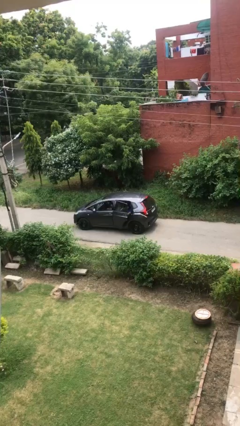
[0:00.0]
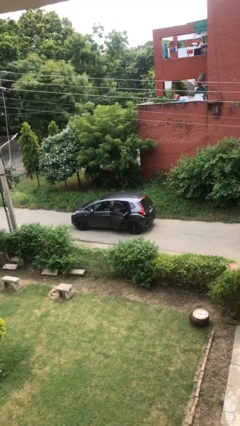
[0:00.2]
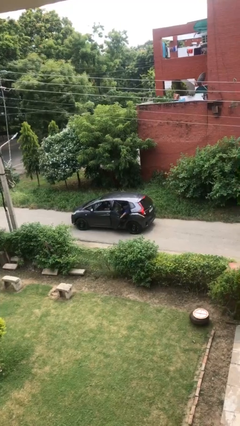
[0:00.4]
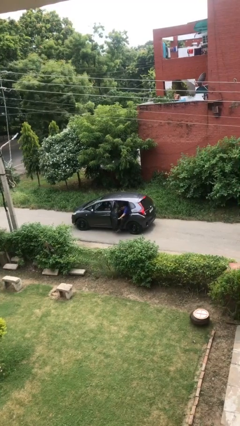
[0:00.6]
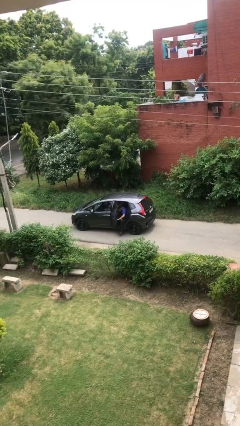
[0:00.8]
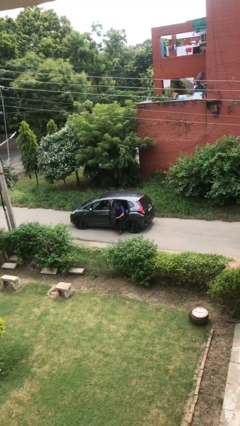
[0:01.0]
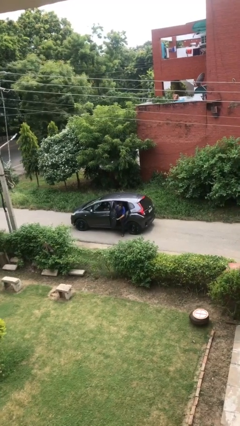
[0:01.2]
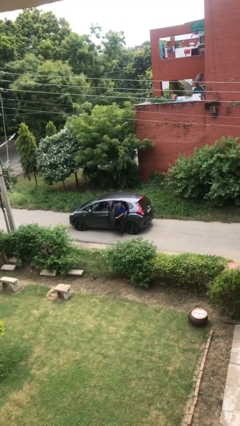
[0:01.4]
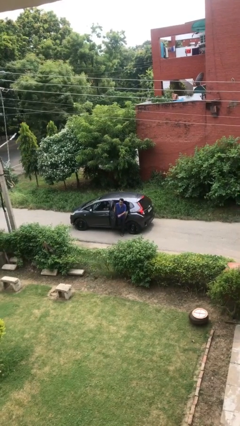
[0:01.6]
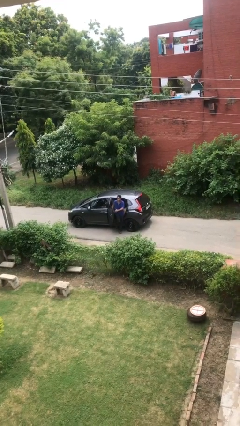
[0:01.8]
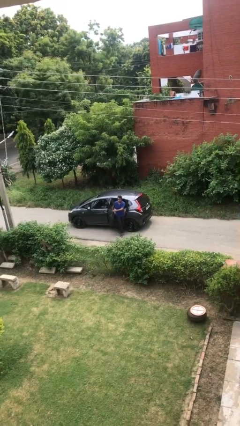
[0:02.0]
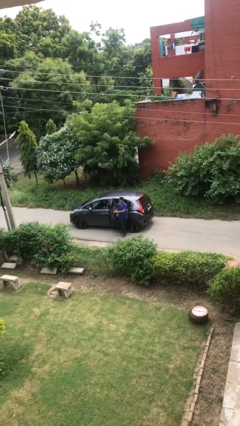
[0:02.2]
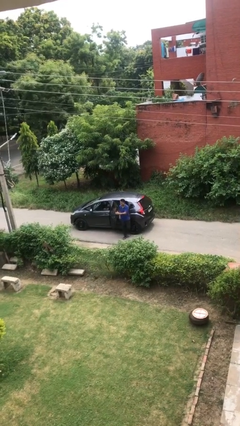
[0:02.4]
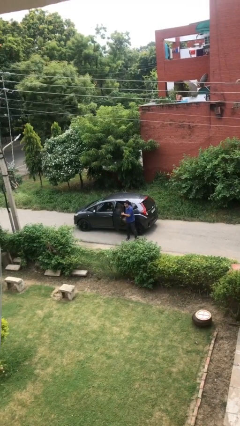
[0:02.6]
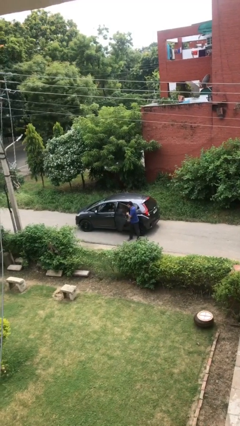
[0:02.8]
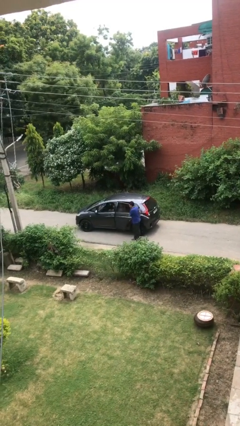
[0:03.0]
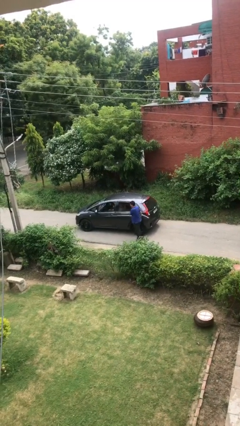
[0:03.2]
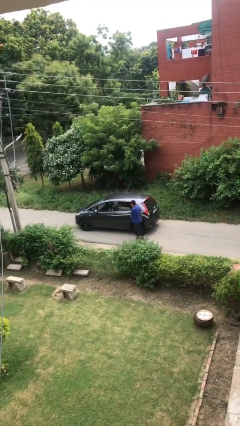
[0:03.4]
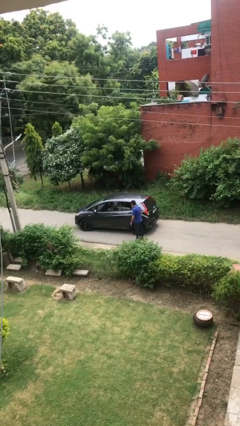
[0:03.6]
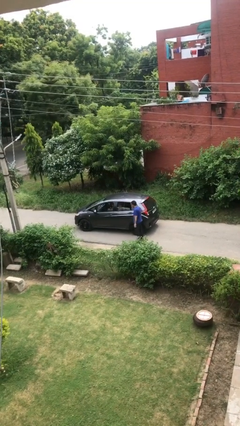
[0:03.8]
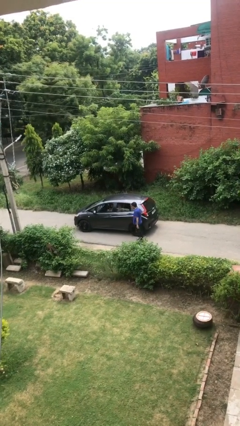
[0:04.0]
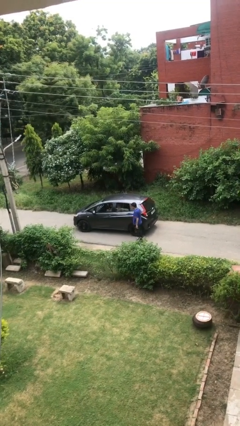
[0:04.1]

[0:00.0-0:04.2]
car drops off person

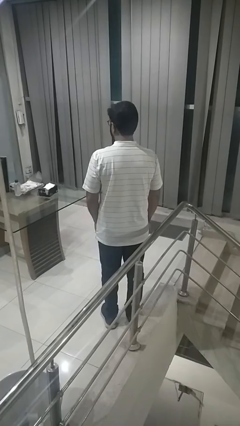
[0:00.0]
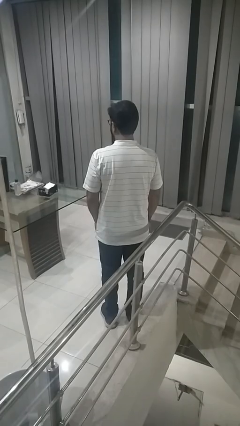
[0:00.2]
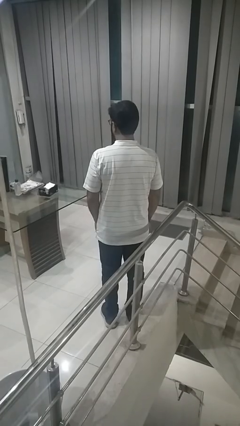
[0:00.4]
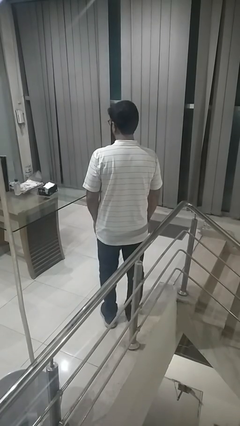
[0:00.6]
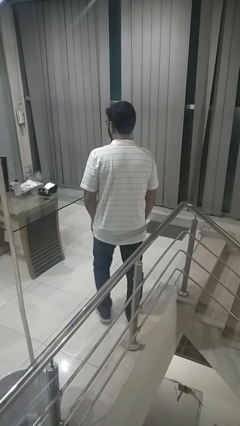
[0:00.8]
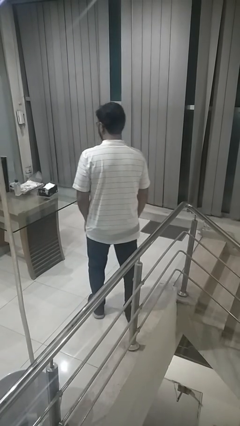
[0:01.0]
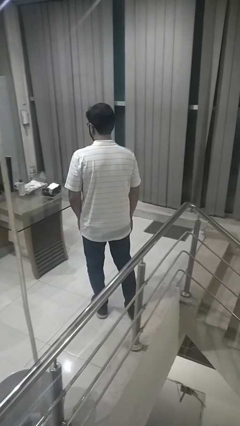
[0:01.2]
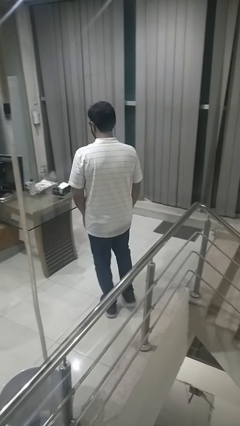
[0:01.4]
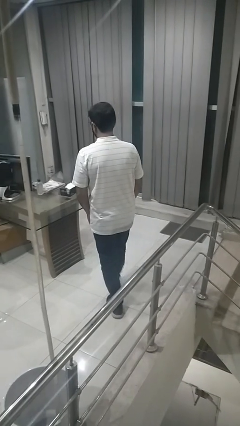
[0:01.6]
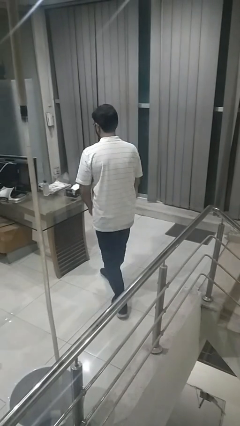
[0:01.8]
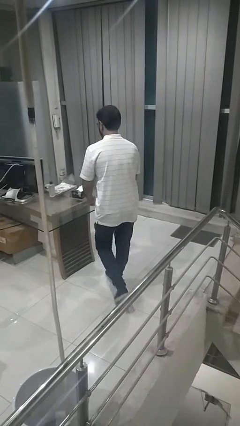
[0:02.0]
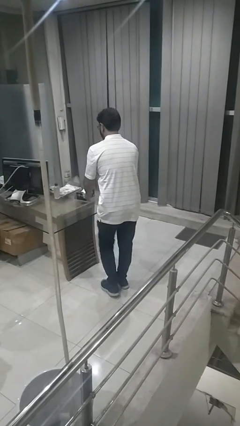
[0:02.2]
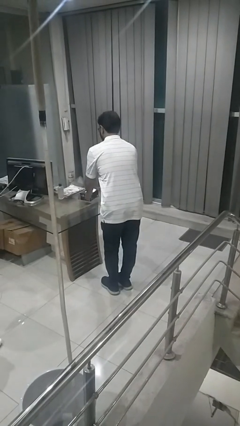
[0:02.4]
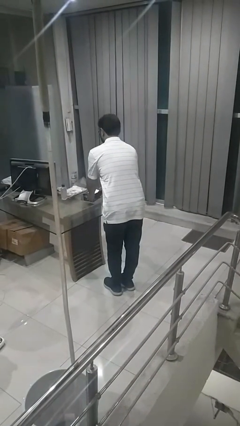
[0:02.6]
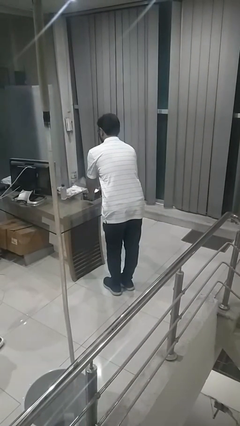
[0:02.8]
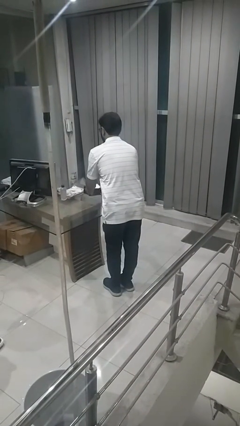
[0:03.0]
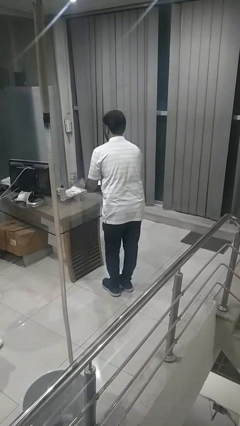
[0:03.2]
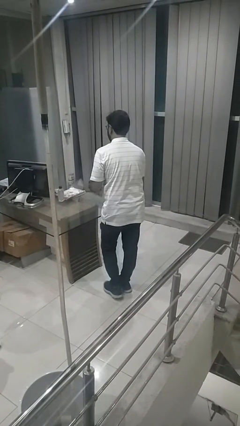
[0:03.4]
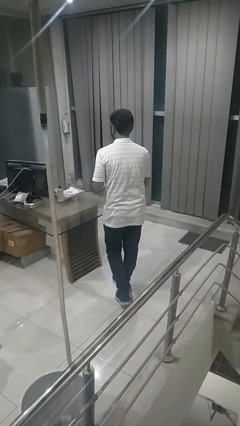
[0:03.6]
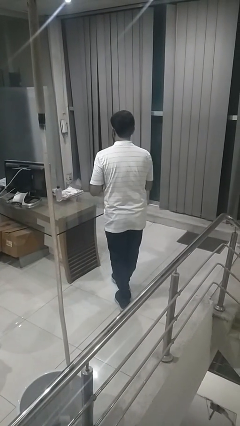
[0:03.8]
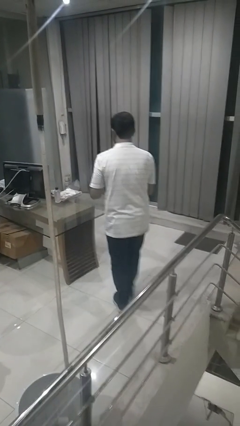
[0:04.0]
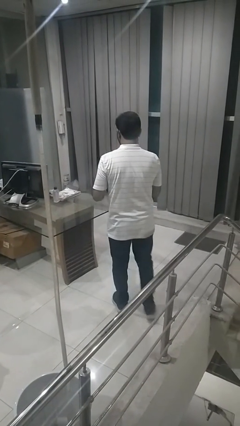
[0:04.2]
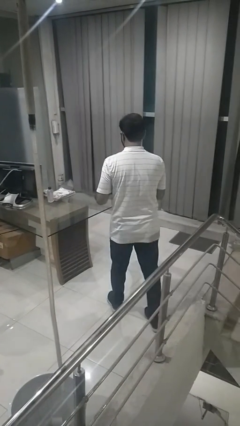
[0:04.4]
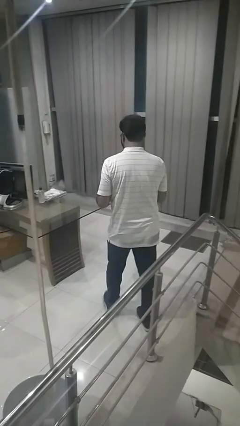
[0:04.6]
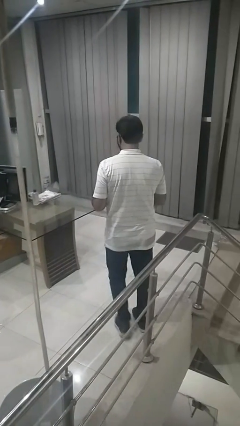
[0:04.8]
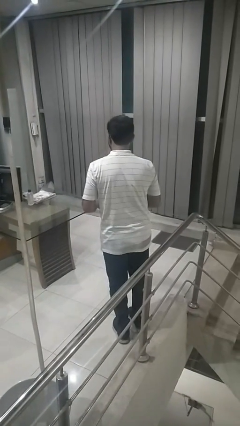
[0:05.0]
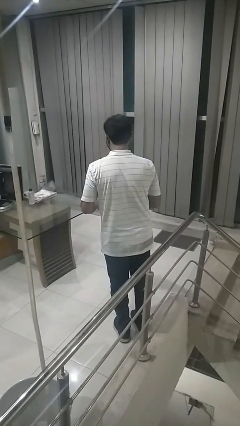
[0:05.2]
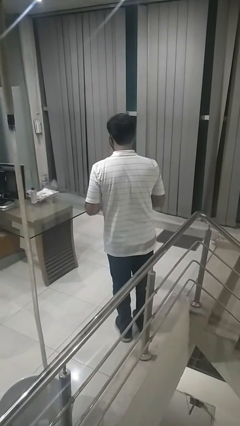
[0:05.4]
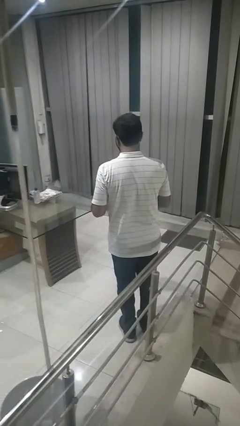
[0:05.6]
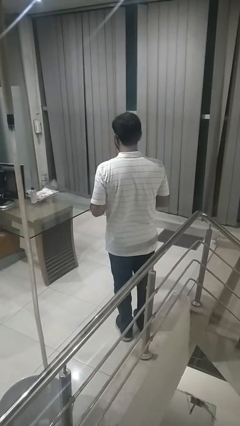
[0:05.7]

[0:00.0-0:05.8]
person picks up object from table

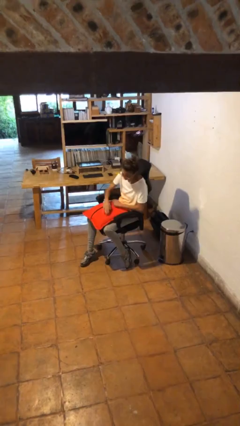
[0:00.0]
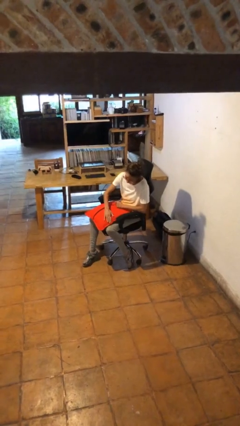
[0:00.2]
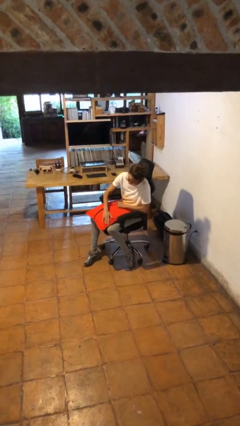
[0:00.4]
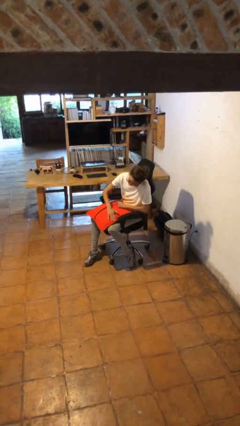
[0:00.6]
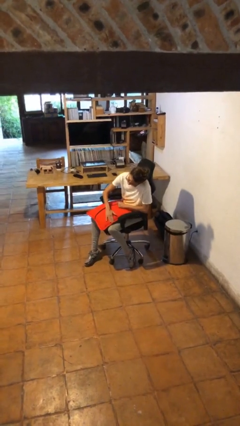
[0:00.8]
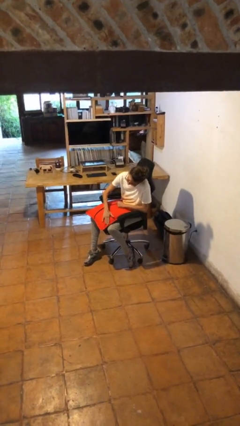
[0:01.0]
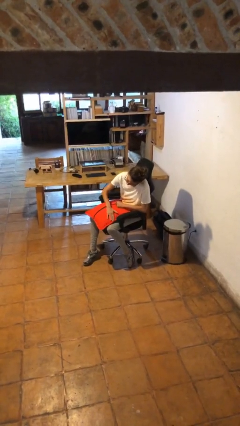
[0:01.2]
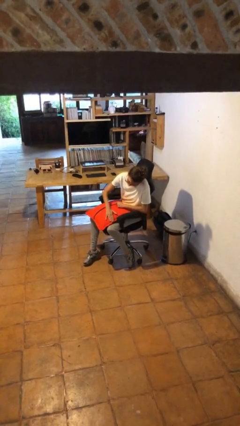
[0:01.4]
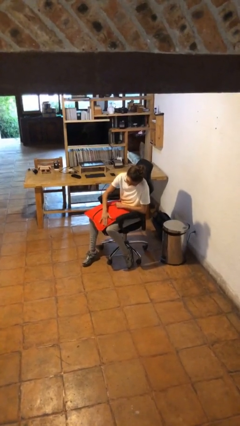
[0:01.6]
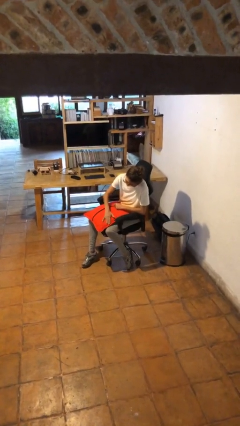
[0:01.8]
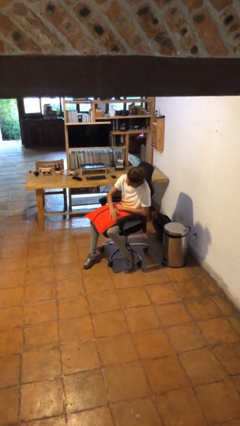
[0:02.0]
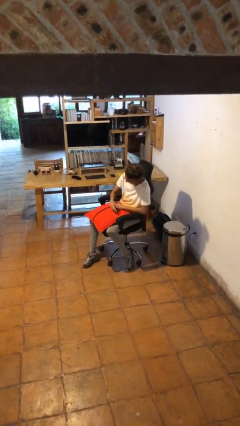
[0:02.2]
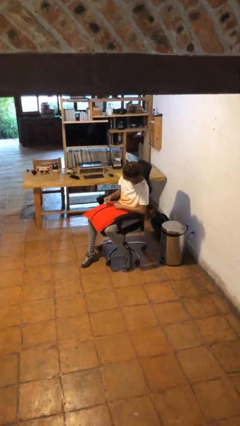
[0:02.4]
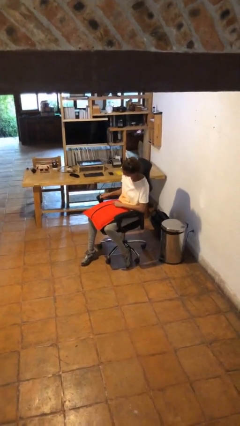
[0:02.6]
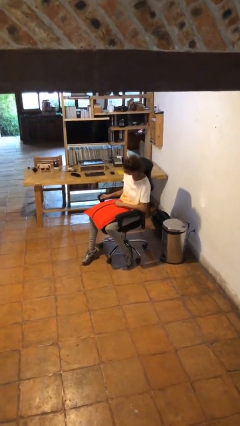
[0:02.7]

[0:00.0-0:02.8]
person waves hand over object

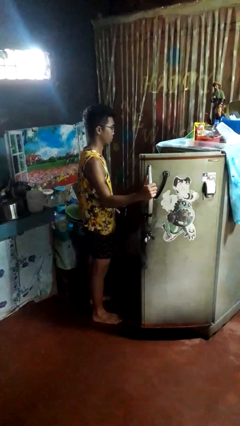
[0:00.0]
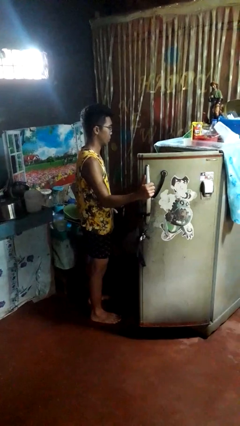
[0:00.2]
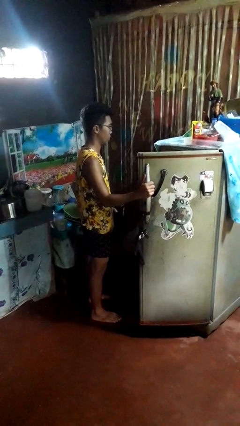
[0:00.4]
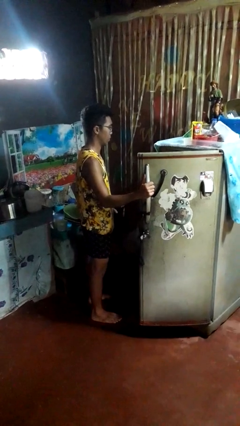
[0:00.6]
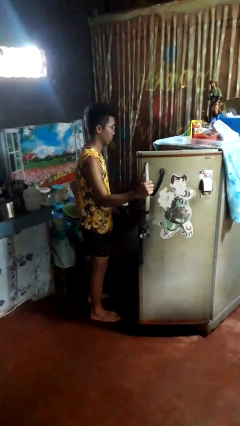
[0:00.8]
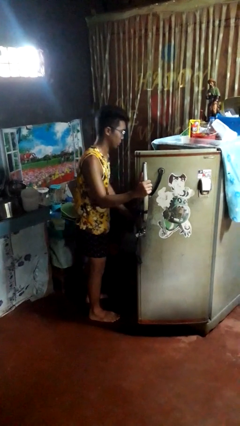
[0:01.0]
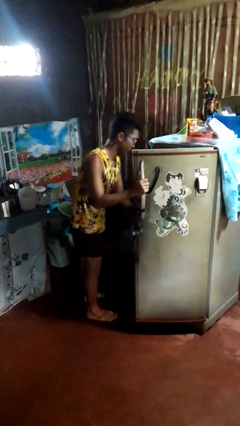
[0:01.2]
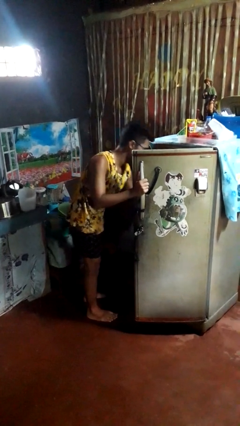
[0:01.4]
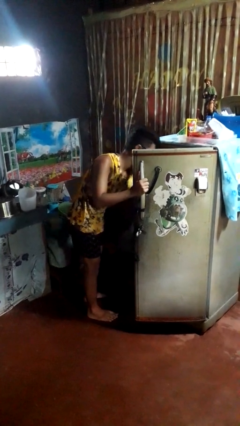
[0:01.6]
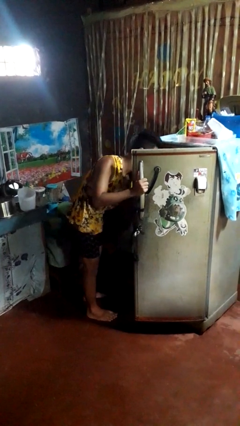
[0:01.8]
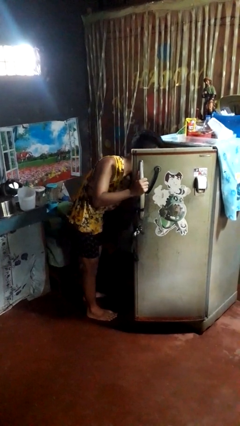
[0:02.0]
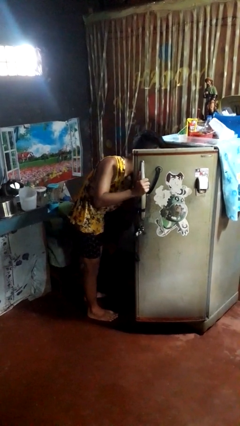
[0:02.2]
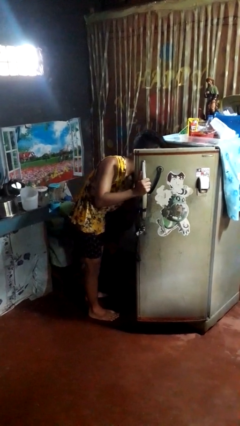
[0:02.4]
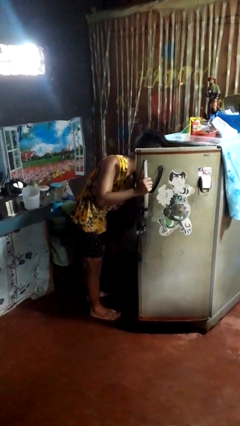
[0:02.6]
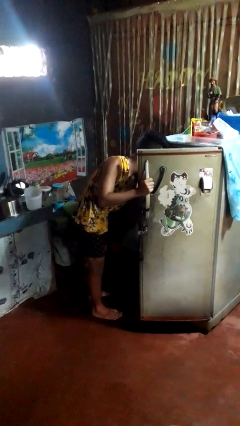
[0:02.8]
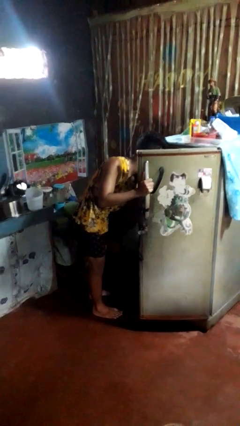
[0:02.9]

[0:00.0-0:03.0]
person puts object into refrigerator

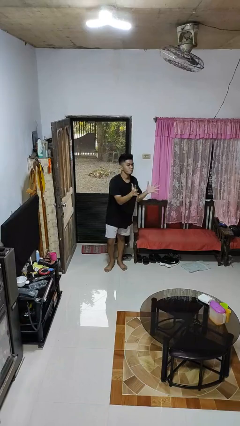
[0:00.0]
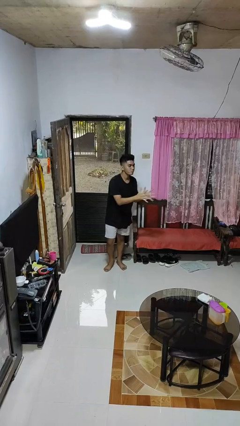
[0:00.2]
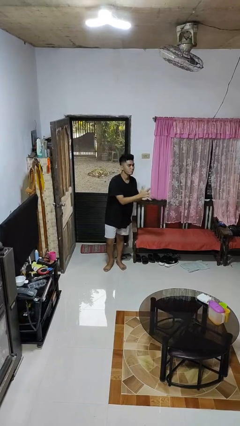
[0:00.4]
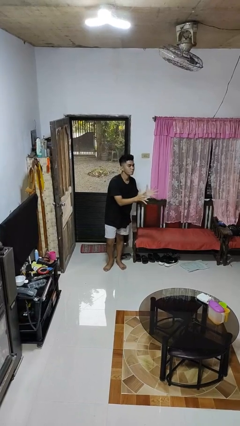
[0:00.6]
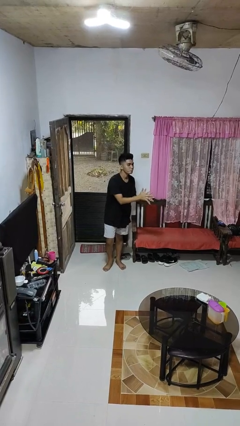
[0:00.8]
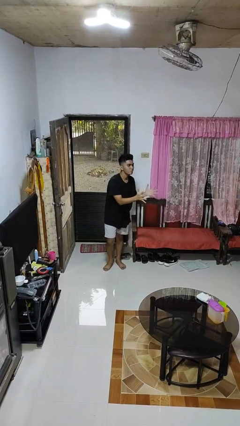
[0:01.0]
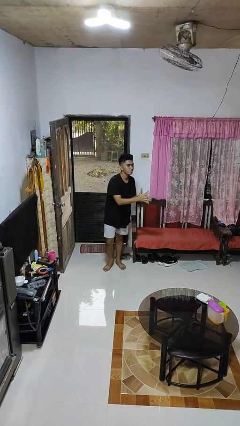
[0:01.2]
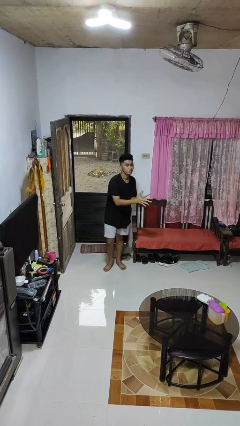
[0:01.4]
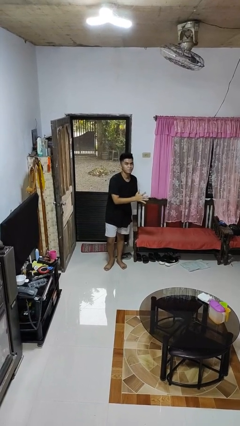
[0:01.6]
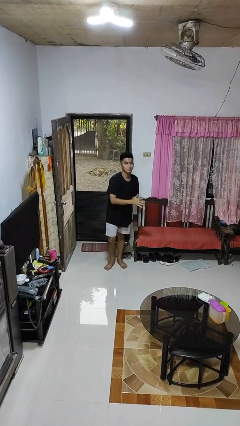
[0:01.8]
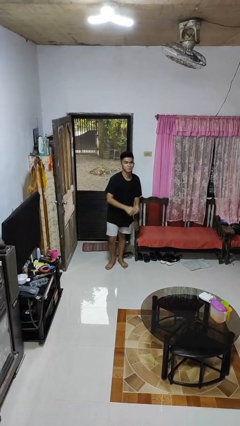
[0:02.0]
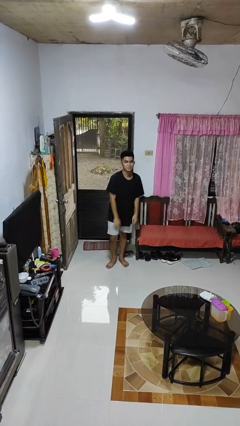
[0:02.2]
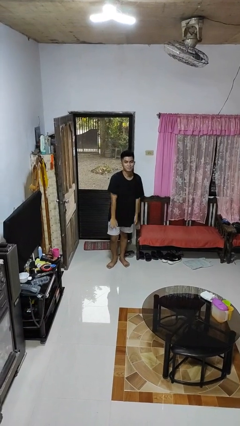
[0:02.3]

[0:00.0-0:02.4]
person claps hands
